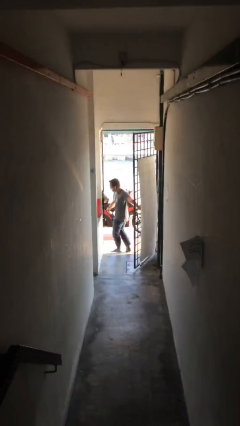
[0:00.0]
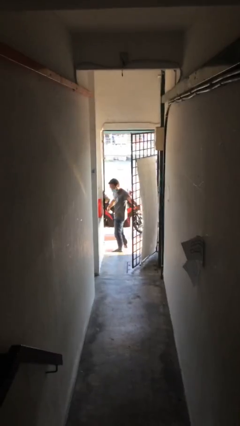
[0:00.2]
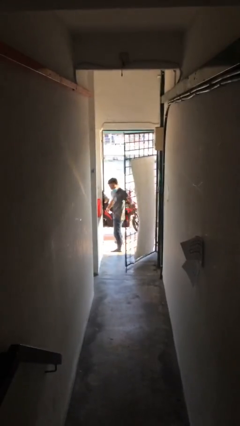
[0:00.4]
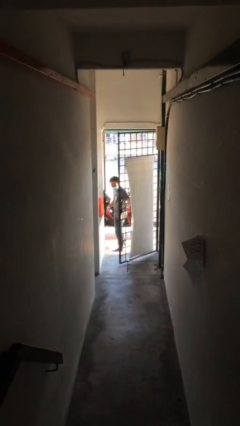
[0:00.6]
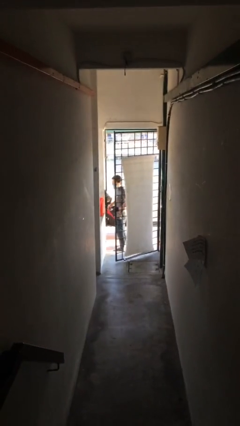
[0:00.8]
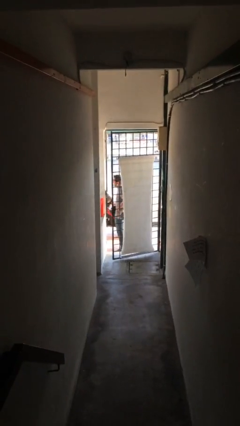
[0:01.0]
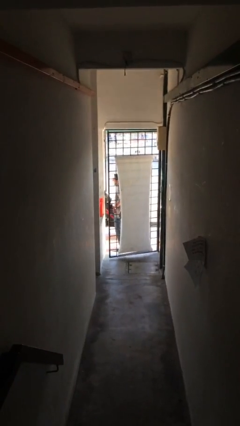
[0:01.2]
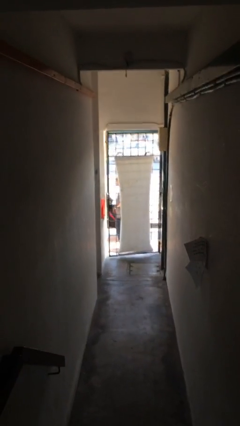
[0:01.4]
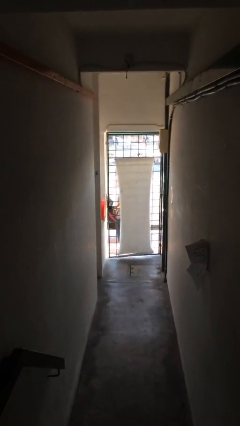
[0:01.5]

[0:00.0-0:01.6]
person closes facility door

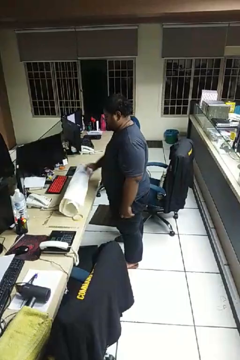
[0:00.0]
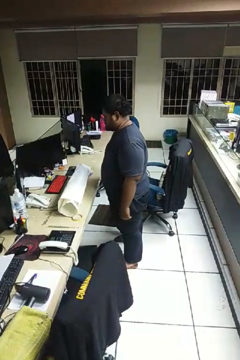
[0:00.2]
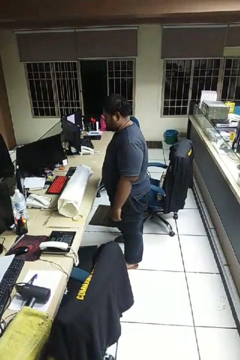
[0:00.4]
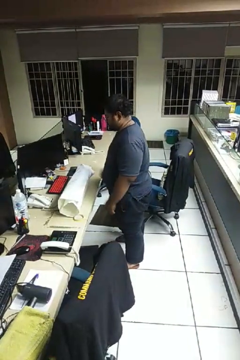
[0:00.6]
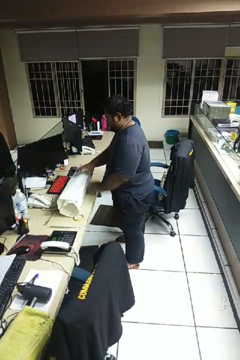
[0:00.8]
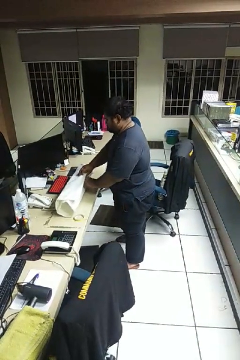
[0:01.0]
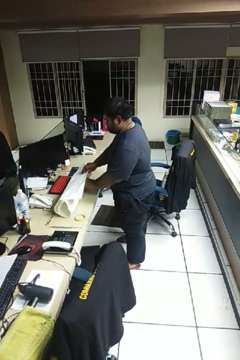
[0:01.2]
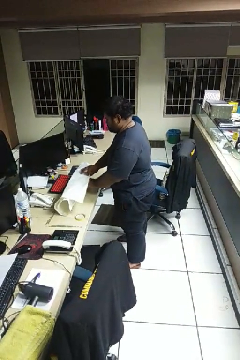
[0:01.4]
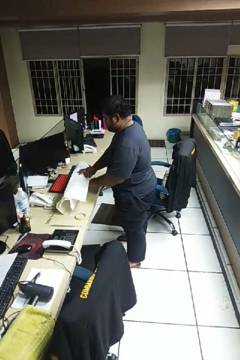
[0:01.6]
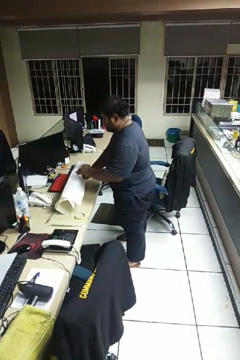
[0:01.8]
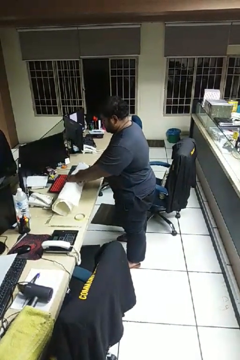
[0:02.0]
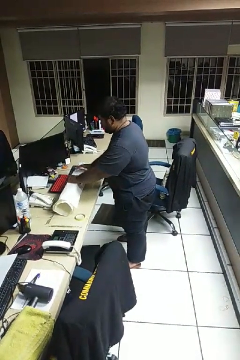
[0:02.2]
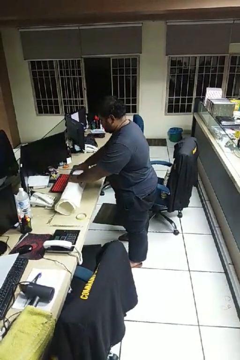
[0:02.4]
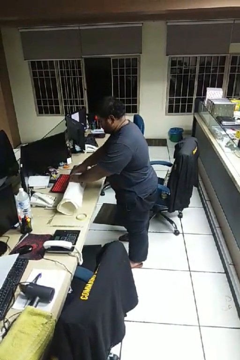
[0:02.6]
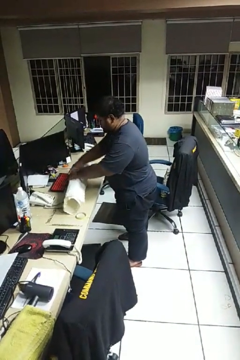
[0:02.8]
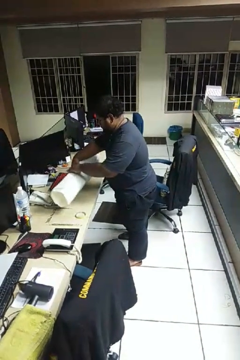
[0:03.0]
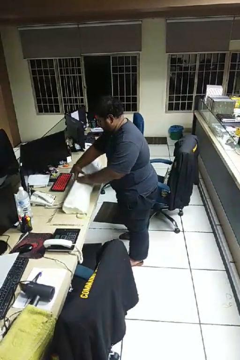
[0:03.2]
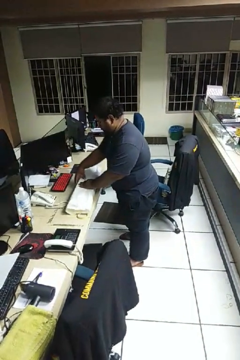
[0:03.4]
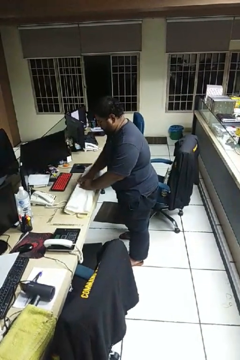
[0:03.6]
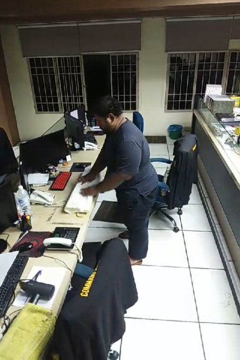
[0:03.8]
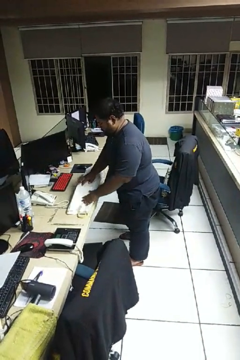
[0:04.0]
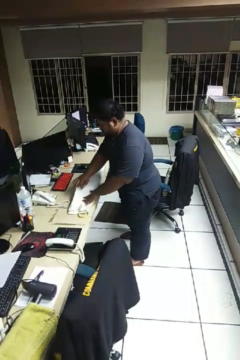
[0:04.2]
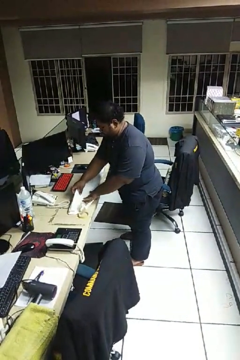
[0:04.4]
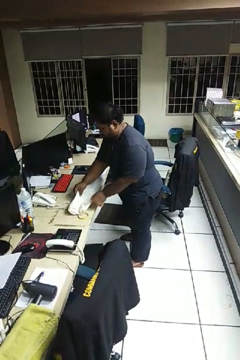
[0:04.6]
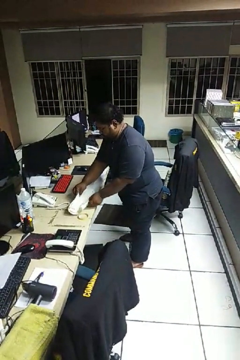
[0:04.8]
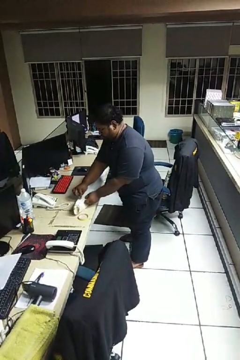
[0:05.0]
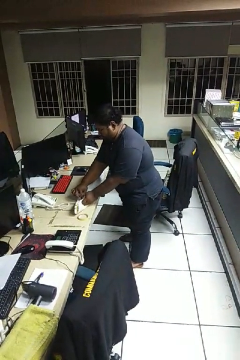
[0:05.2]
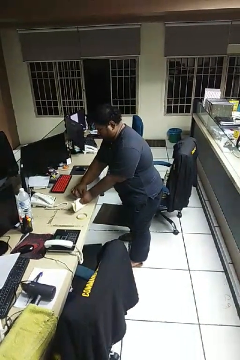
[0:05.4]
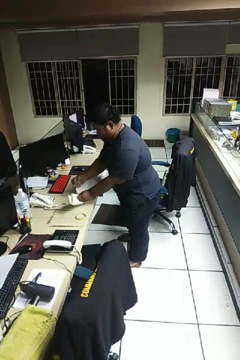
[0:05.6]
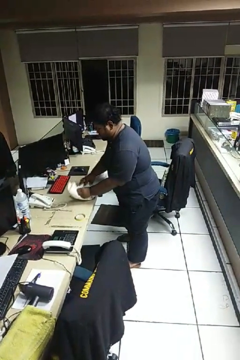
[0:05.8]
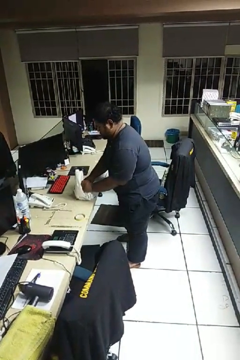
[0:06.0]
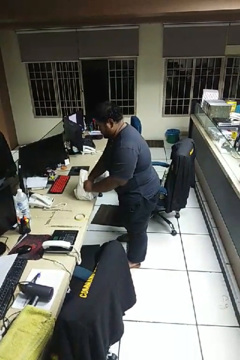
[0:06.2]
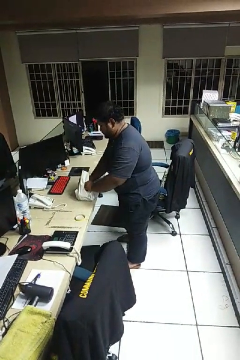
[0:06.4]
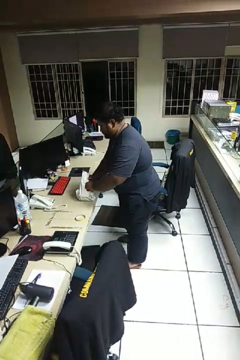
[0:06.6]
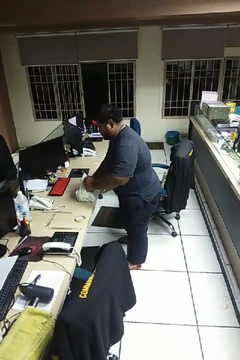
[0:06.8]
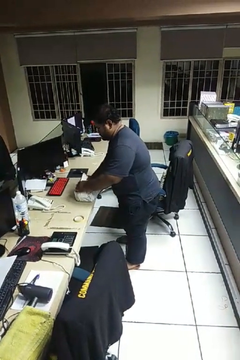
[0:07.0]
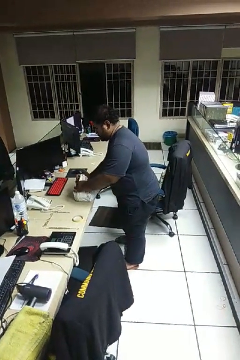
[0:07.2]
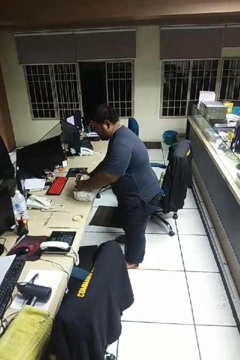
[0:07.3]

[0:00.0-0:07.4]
person wraps box

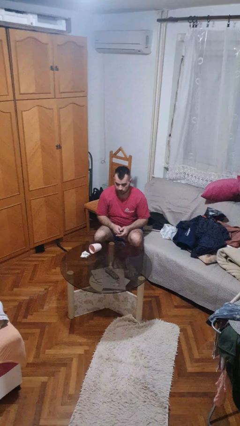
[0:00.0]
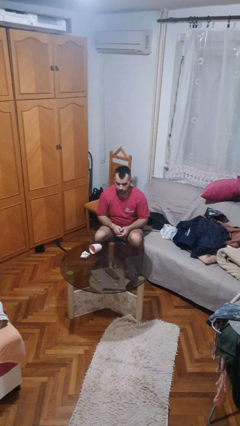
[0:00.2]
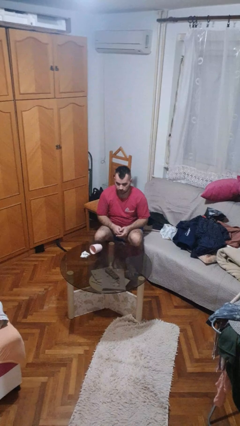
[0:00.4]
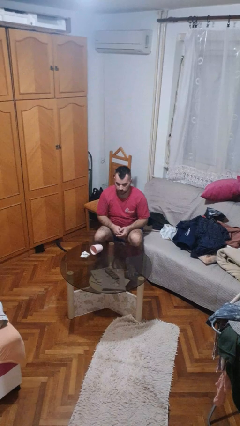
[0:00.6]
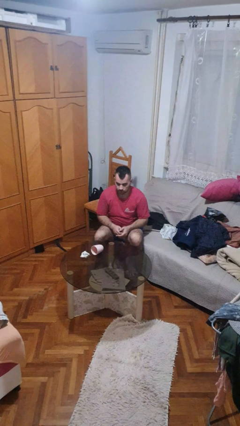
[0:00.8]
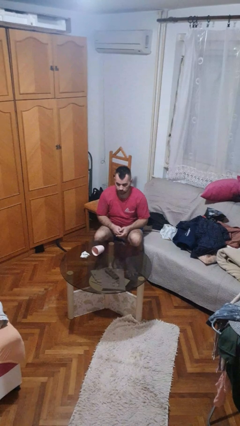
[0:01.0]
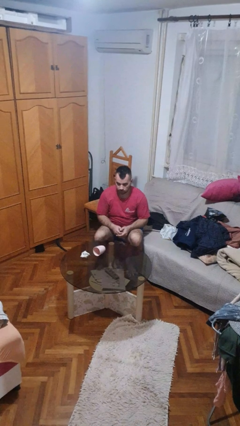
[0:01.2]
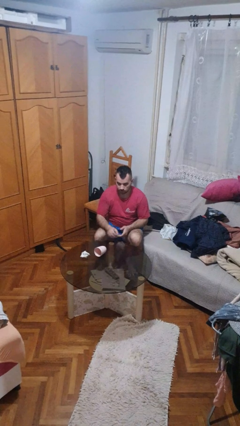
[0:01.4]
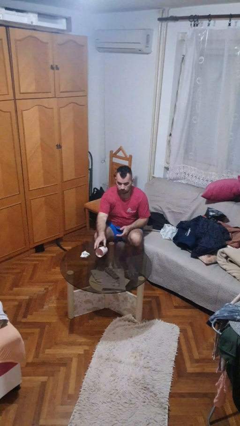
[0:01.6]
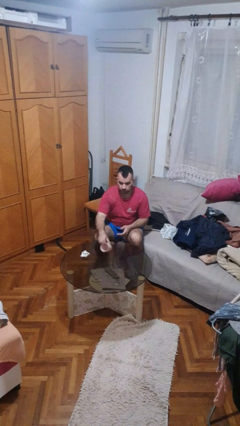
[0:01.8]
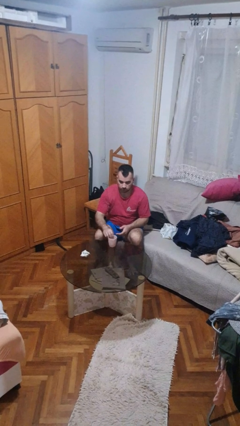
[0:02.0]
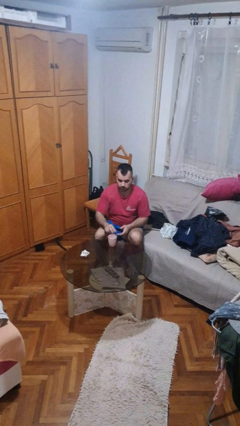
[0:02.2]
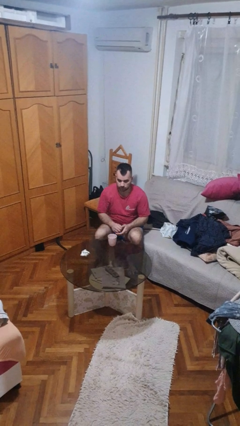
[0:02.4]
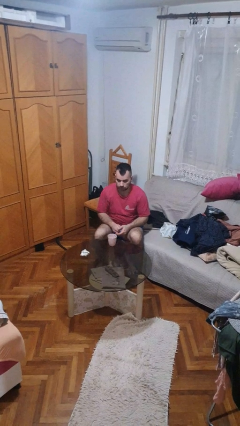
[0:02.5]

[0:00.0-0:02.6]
person sets upright glass

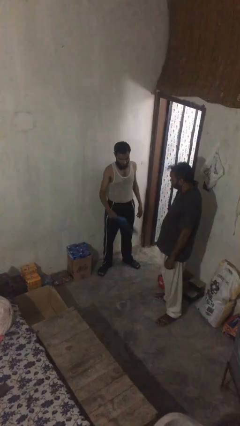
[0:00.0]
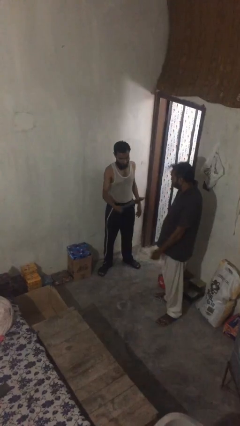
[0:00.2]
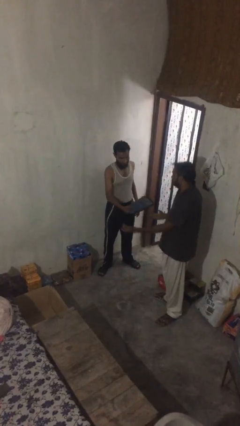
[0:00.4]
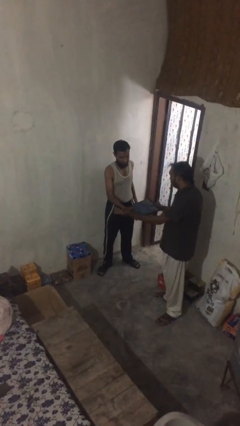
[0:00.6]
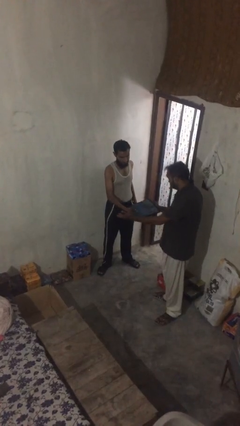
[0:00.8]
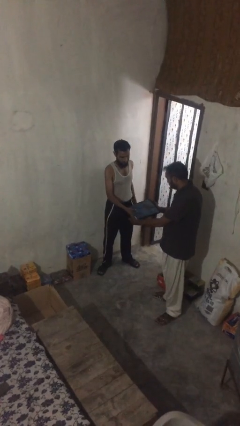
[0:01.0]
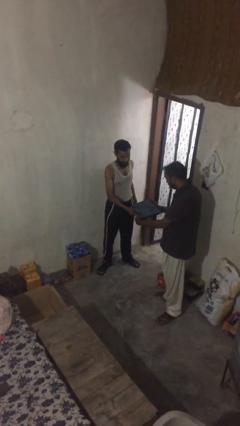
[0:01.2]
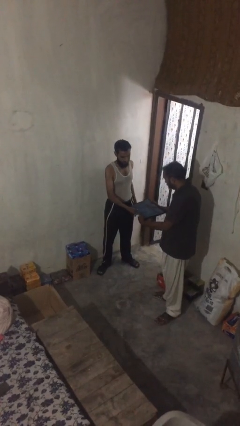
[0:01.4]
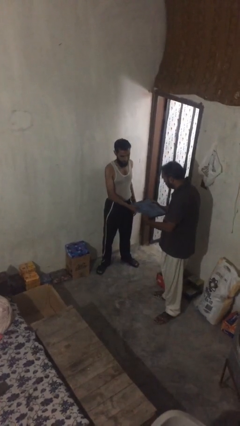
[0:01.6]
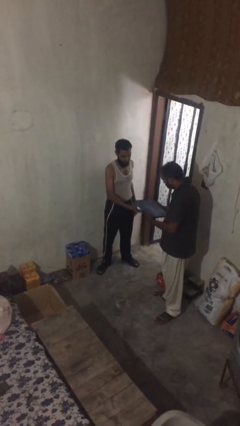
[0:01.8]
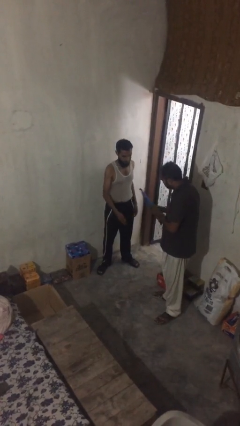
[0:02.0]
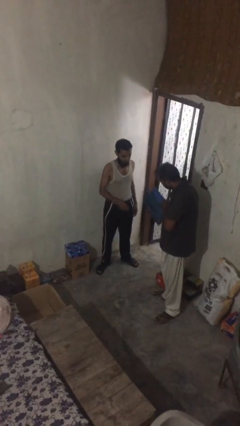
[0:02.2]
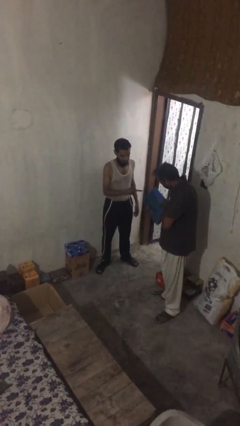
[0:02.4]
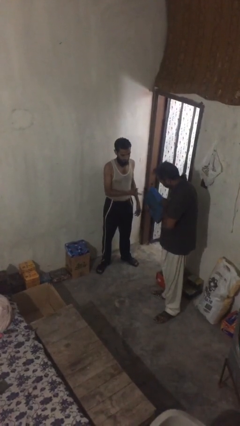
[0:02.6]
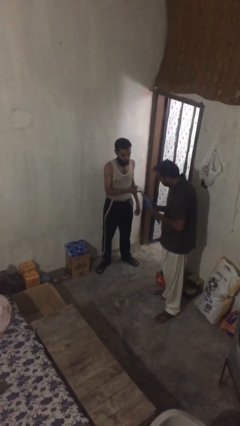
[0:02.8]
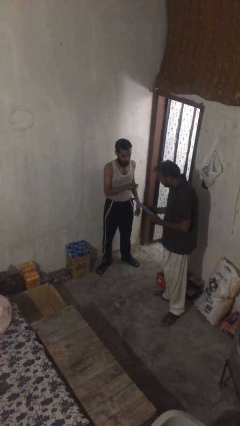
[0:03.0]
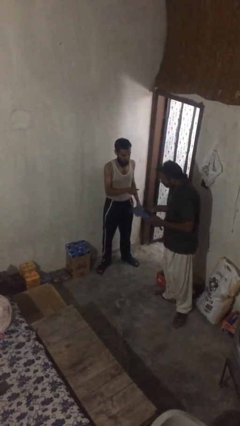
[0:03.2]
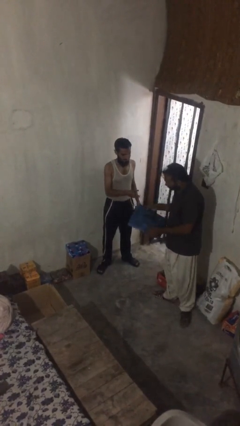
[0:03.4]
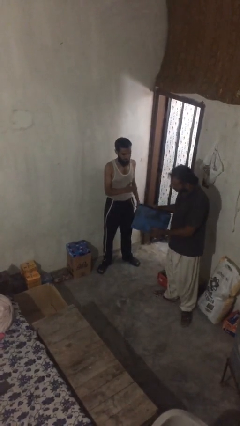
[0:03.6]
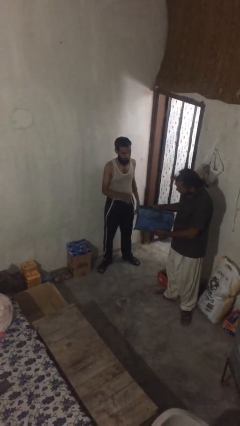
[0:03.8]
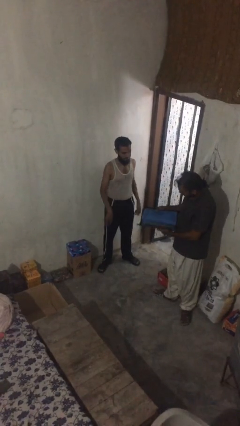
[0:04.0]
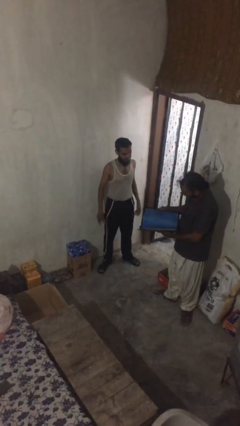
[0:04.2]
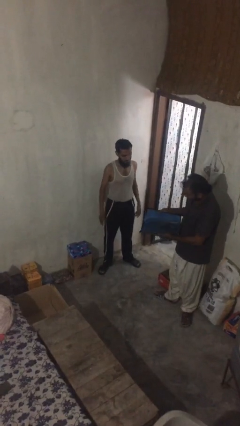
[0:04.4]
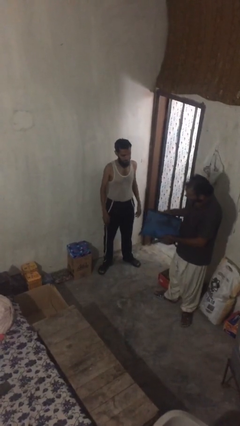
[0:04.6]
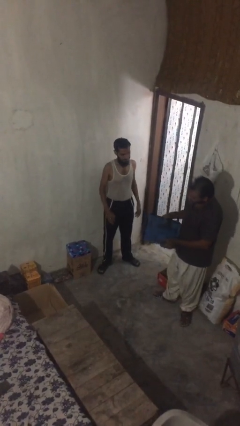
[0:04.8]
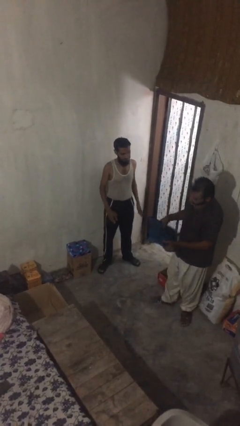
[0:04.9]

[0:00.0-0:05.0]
person transfers object to person

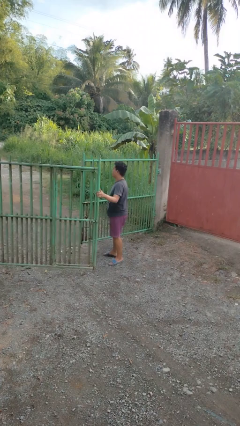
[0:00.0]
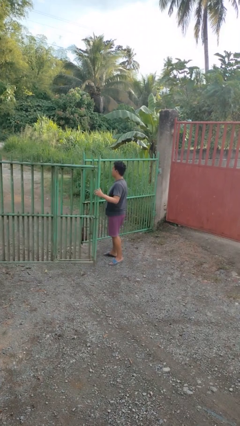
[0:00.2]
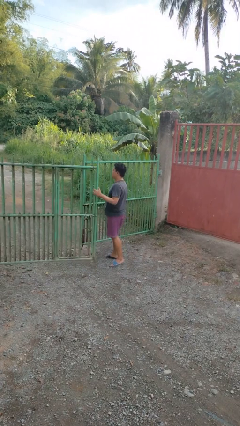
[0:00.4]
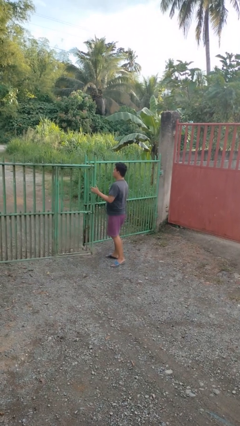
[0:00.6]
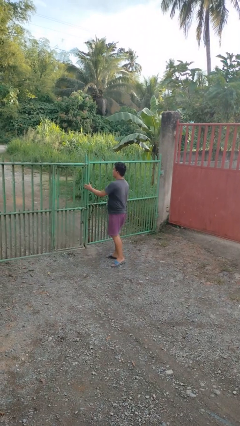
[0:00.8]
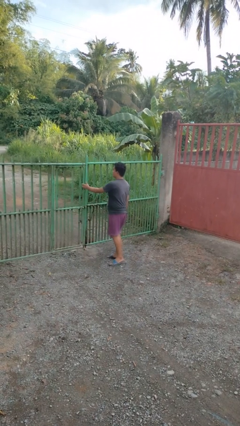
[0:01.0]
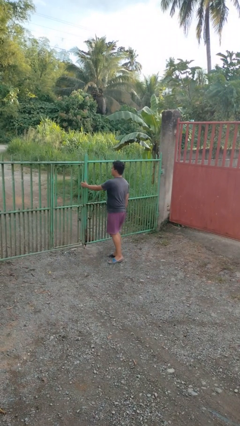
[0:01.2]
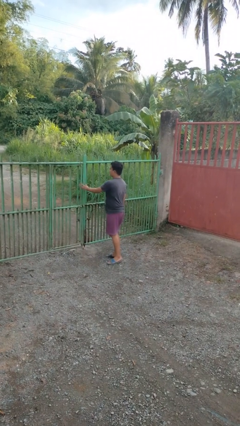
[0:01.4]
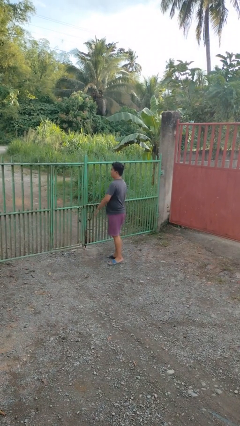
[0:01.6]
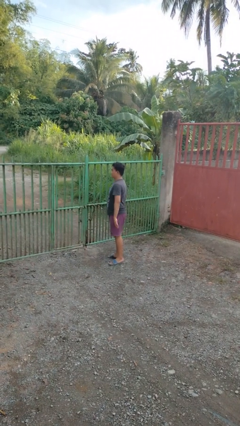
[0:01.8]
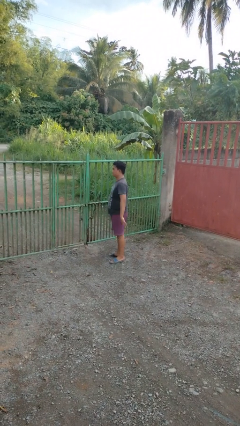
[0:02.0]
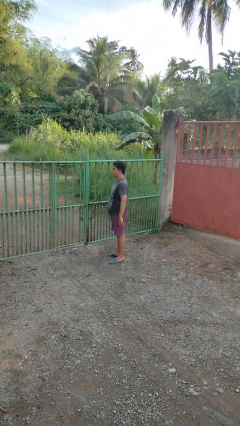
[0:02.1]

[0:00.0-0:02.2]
person closes gate
